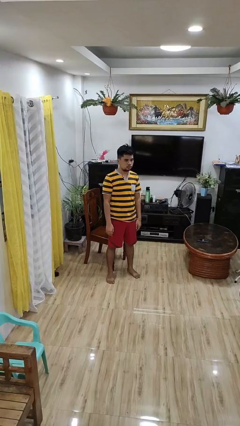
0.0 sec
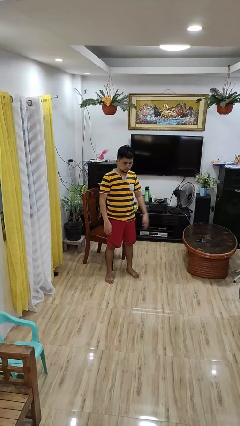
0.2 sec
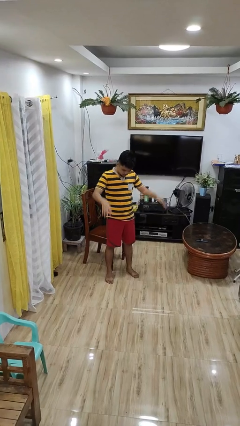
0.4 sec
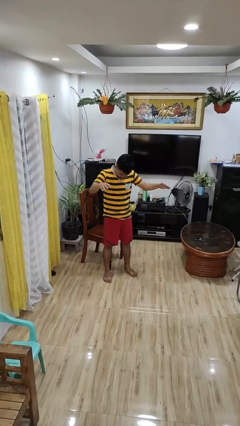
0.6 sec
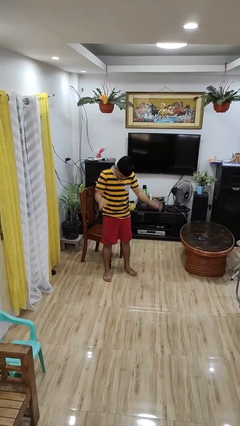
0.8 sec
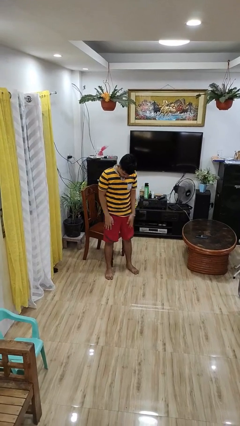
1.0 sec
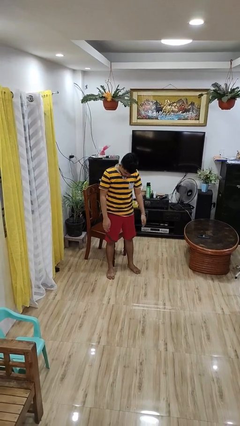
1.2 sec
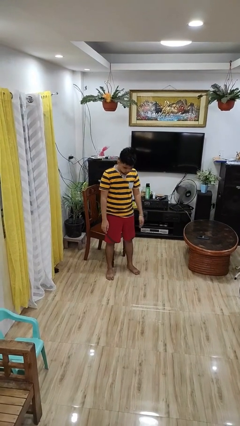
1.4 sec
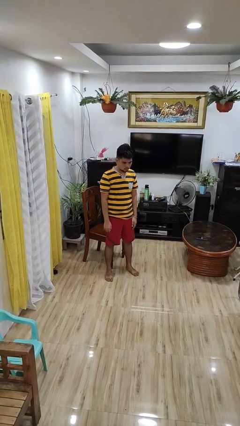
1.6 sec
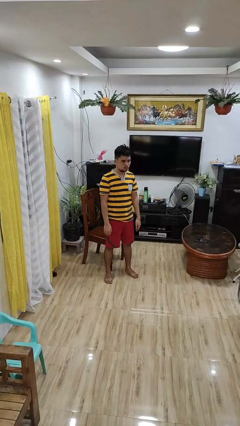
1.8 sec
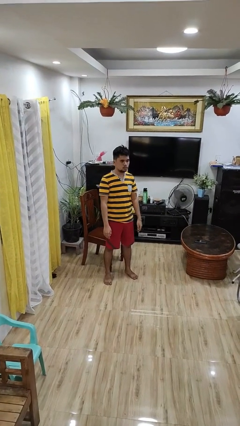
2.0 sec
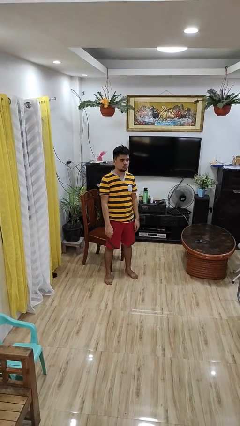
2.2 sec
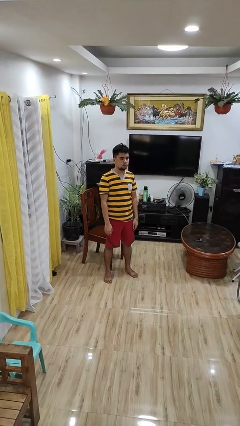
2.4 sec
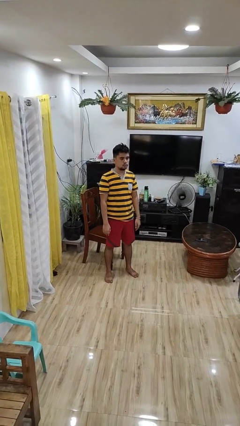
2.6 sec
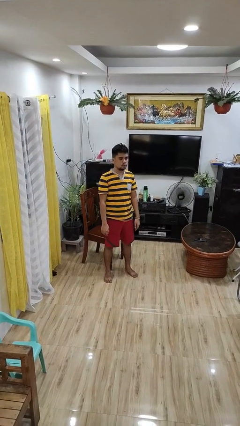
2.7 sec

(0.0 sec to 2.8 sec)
person slaps hands on thighs

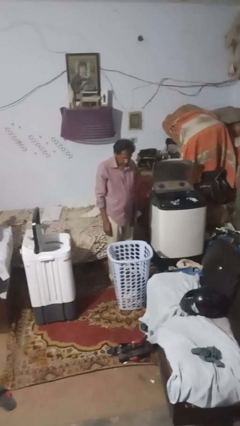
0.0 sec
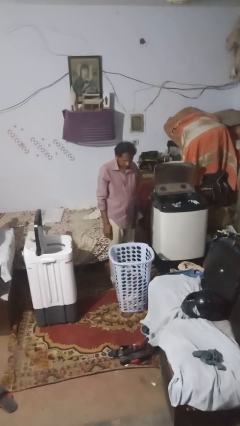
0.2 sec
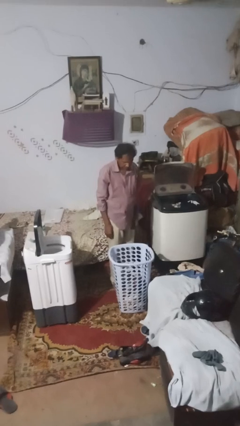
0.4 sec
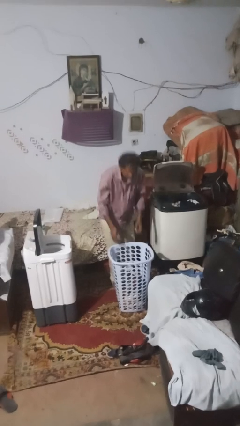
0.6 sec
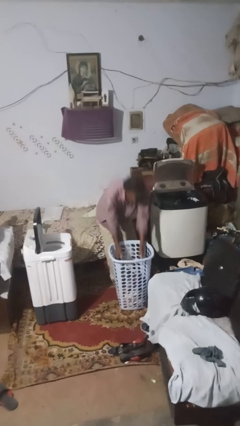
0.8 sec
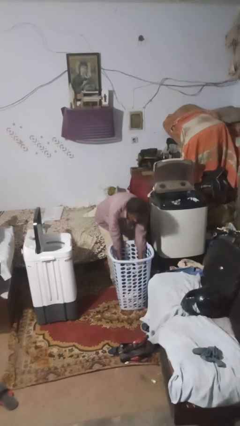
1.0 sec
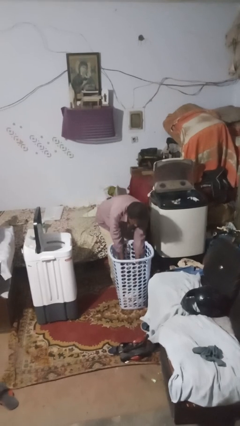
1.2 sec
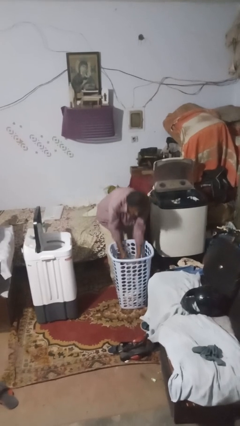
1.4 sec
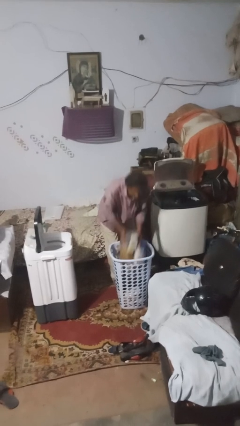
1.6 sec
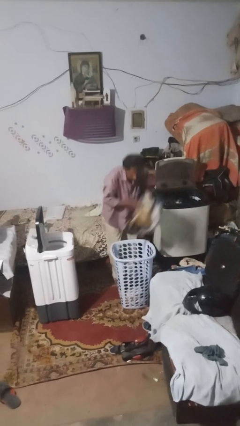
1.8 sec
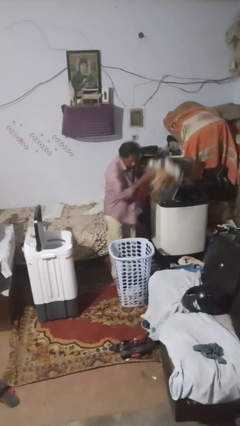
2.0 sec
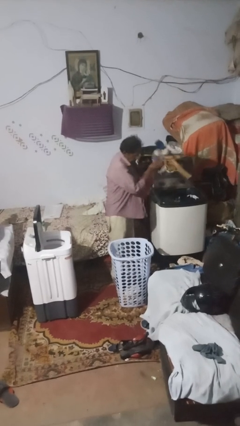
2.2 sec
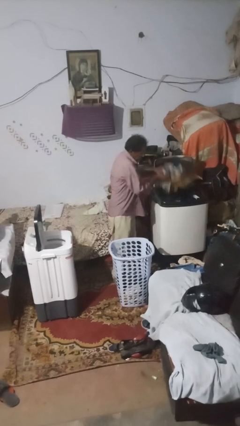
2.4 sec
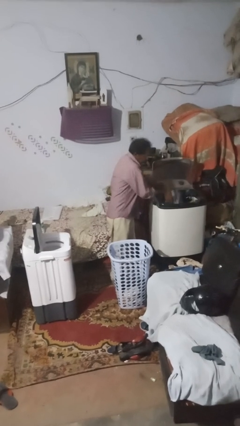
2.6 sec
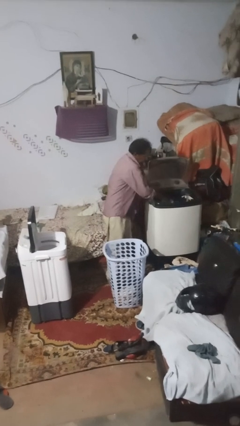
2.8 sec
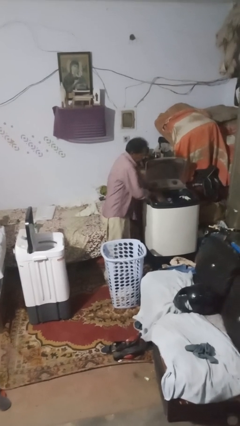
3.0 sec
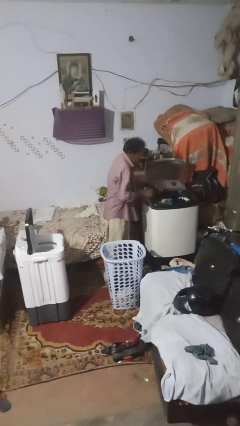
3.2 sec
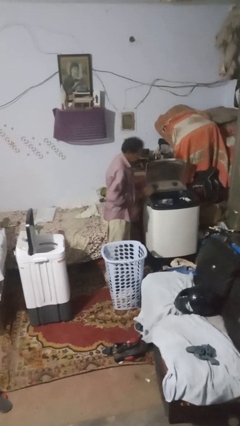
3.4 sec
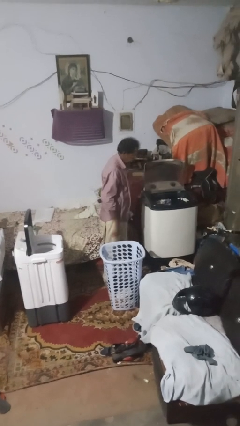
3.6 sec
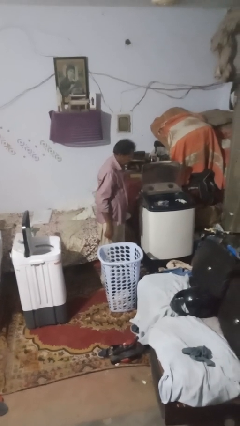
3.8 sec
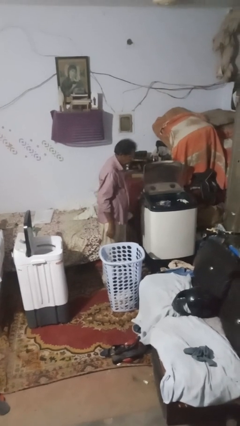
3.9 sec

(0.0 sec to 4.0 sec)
person loads clotheswasher

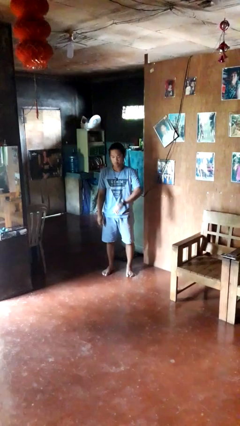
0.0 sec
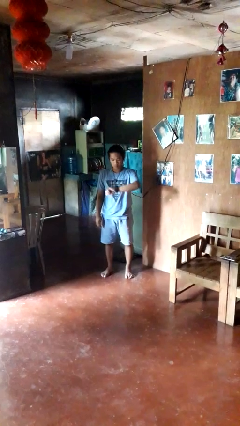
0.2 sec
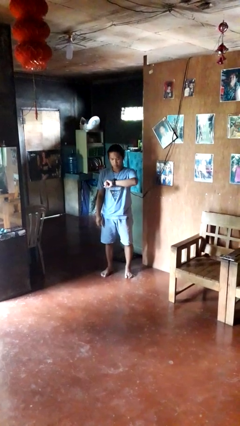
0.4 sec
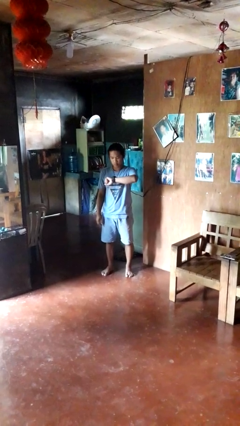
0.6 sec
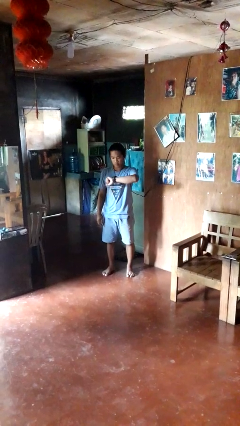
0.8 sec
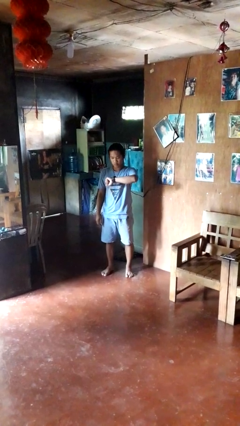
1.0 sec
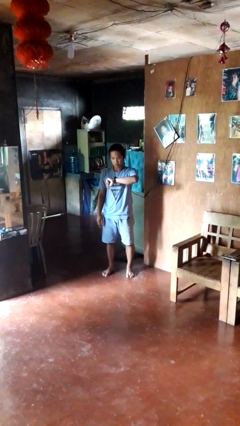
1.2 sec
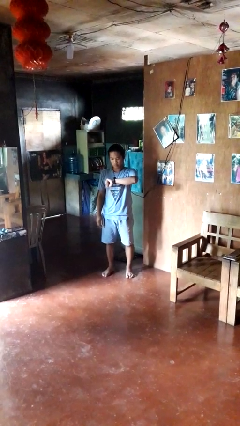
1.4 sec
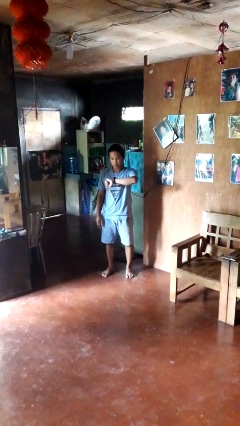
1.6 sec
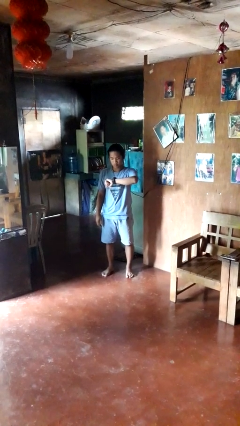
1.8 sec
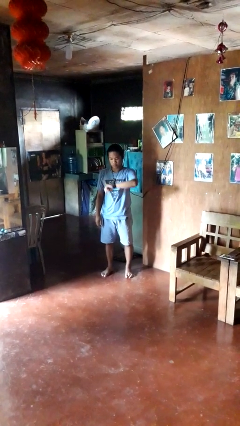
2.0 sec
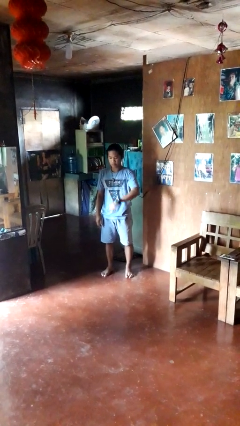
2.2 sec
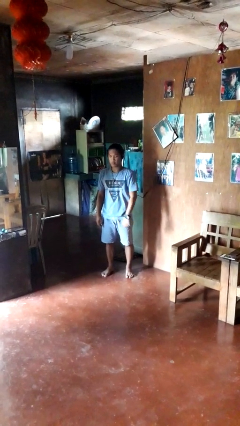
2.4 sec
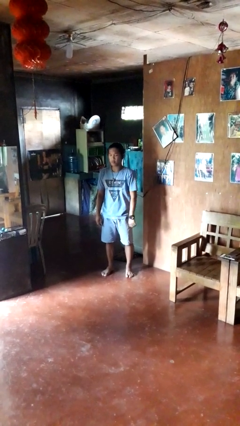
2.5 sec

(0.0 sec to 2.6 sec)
person looks at wristwatch

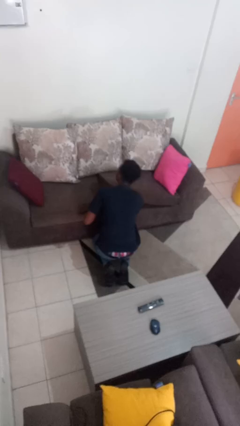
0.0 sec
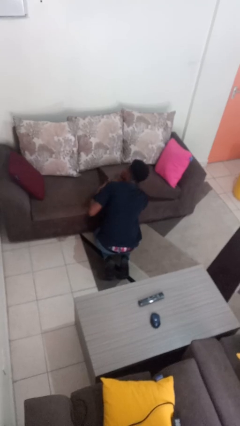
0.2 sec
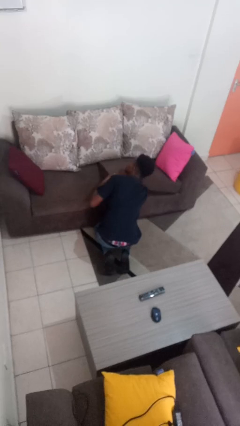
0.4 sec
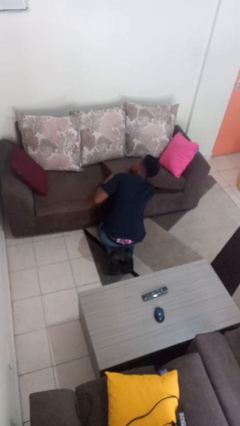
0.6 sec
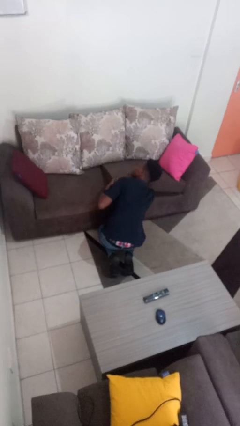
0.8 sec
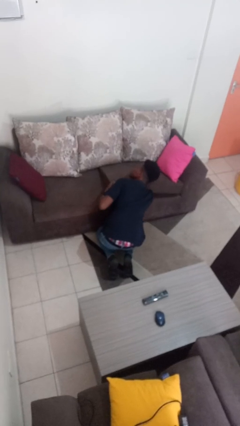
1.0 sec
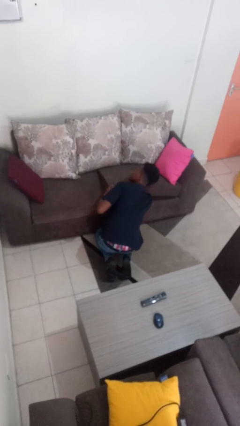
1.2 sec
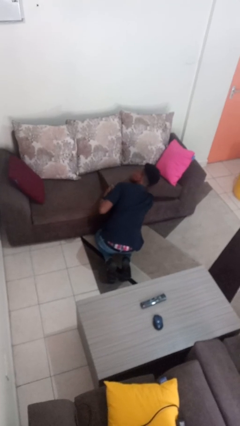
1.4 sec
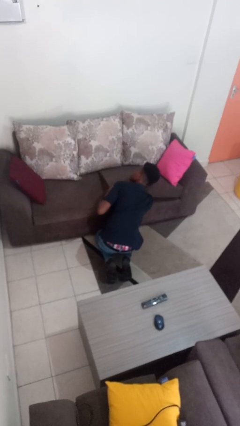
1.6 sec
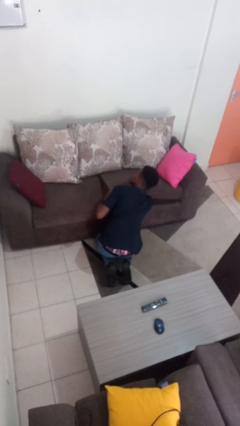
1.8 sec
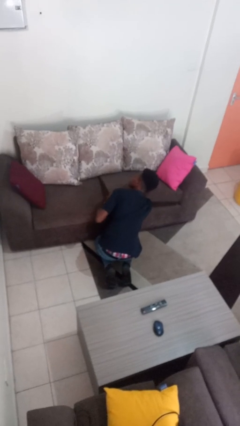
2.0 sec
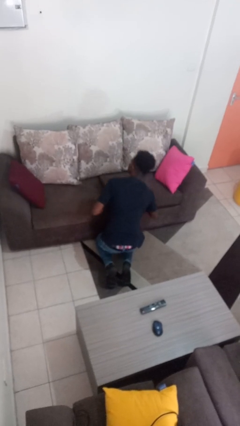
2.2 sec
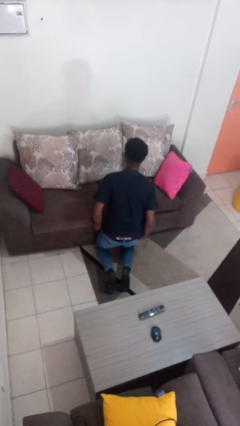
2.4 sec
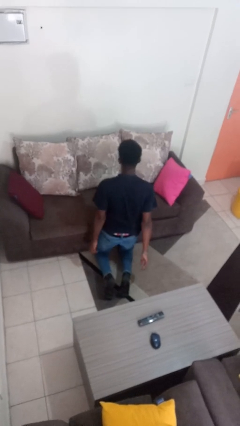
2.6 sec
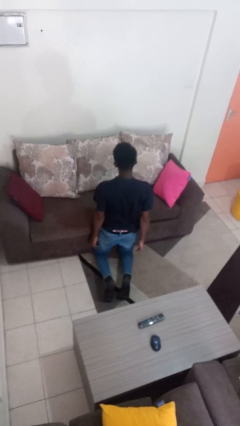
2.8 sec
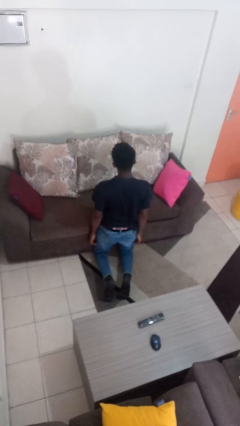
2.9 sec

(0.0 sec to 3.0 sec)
person searches under couch

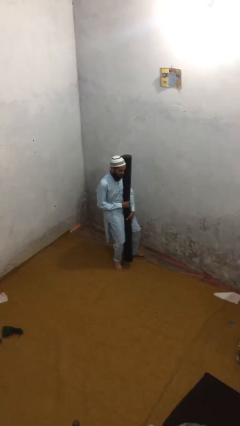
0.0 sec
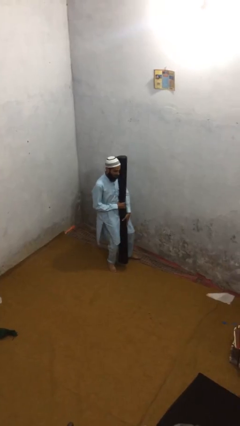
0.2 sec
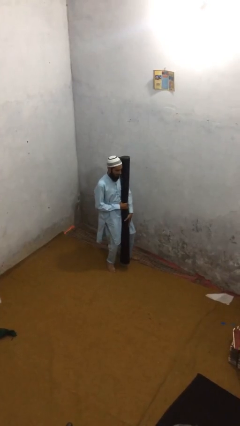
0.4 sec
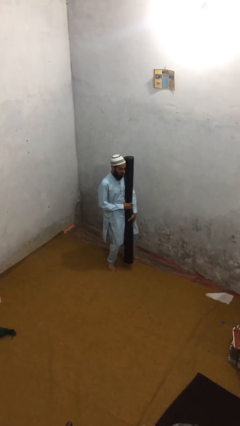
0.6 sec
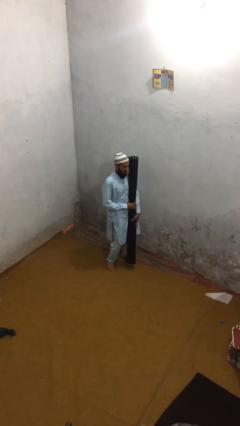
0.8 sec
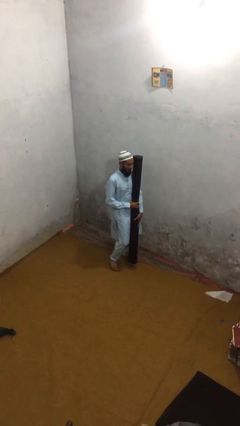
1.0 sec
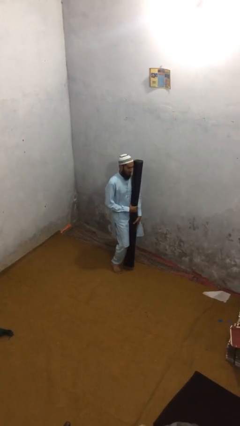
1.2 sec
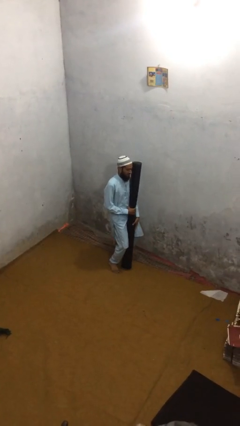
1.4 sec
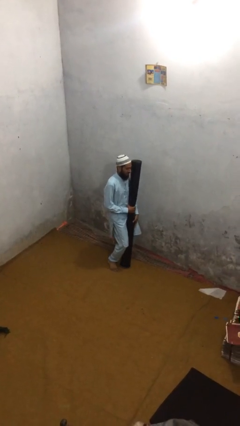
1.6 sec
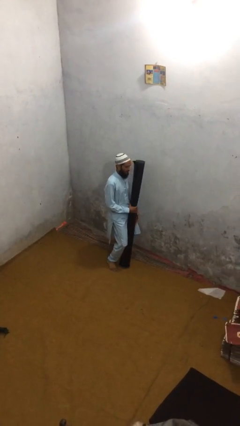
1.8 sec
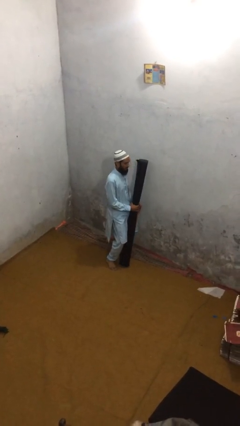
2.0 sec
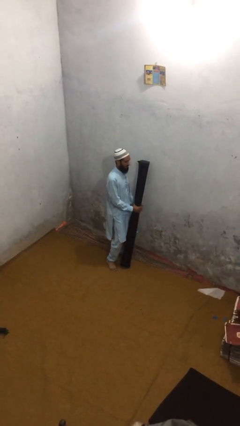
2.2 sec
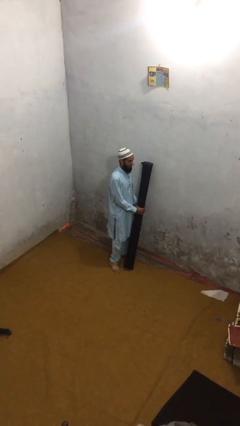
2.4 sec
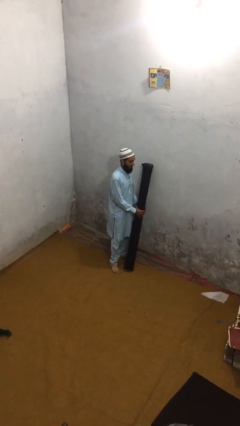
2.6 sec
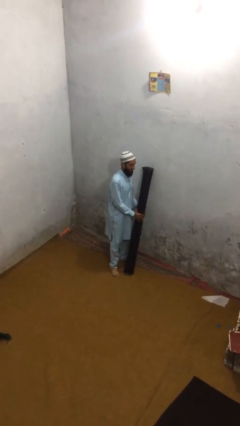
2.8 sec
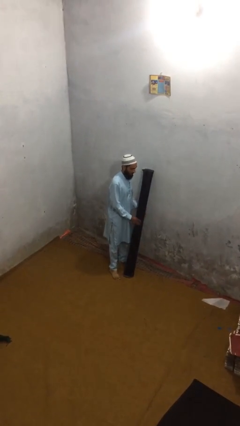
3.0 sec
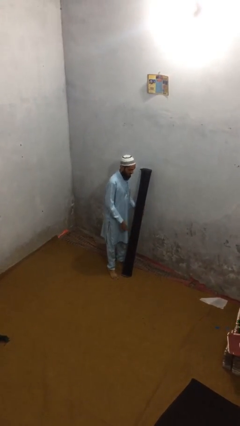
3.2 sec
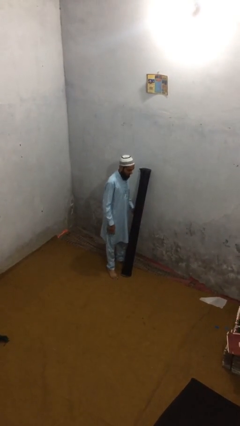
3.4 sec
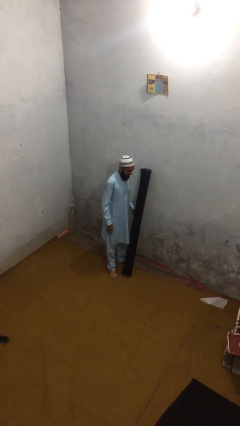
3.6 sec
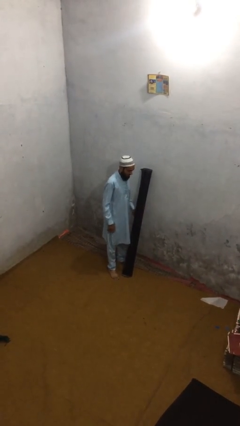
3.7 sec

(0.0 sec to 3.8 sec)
person puts down object on floor

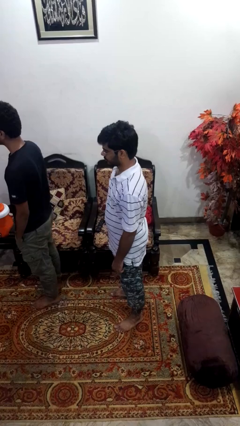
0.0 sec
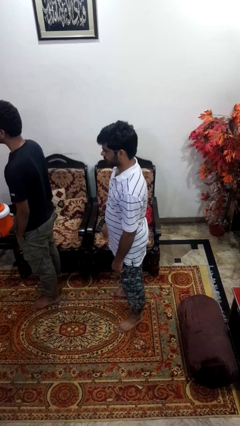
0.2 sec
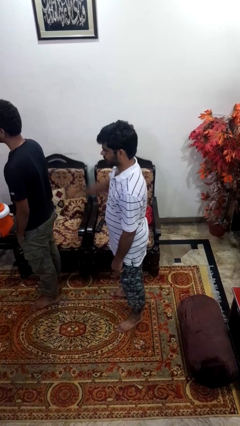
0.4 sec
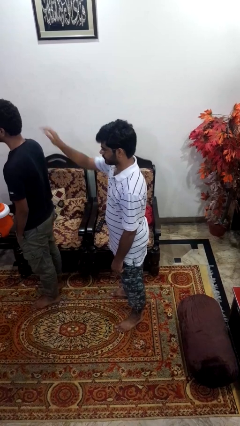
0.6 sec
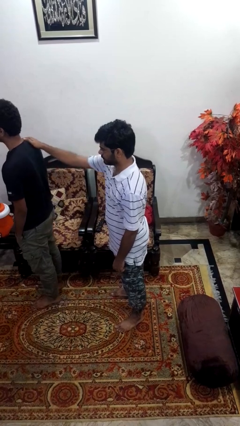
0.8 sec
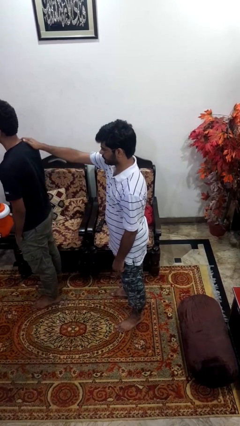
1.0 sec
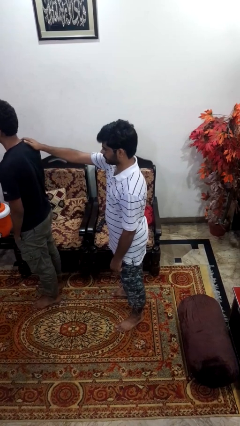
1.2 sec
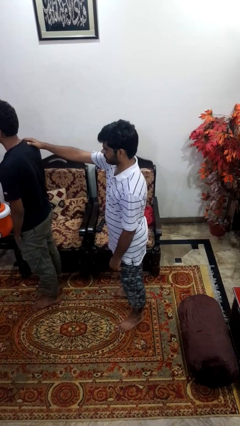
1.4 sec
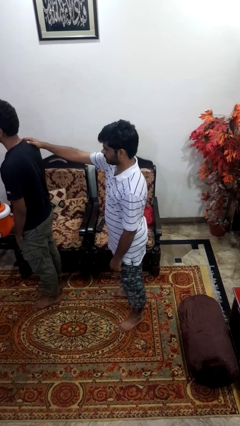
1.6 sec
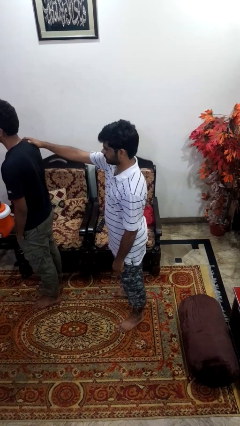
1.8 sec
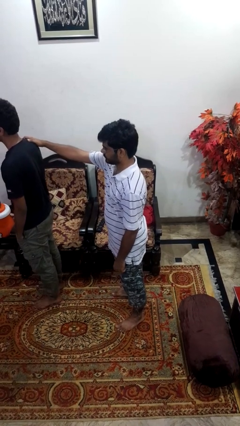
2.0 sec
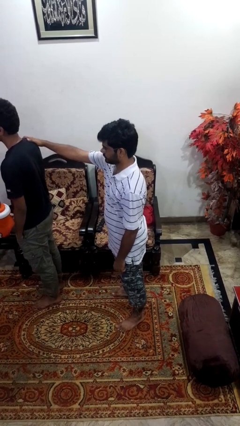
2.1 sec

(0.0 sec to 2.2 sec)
person grabs person by shoulder
